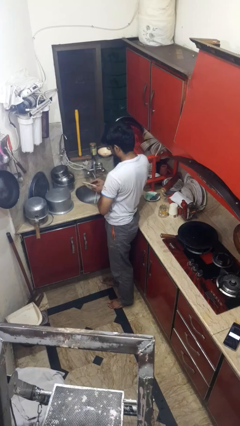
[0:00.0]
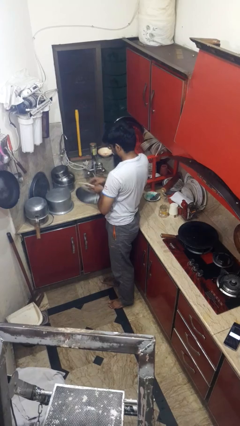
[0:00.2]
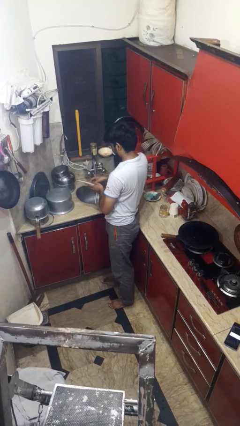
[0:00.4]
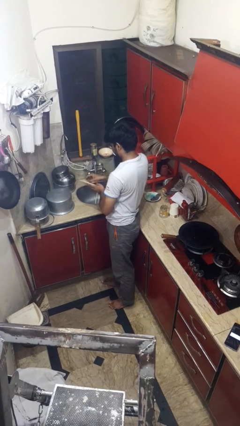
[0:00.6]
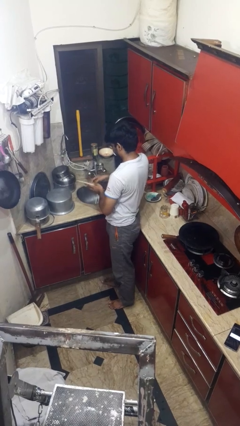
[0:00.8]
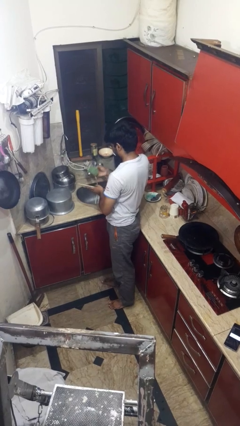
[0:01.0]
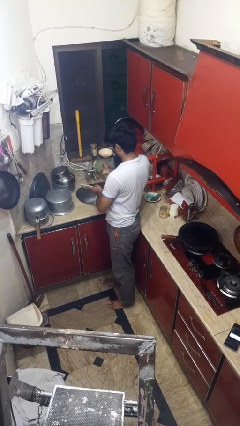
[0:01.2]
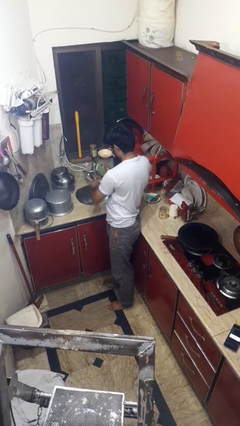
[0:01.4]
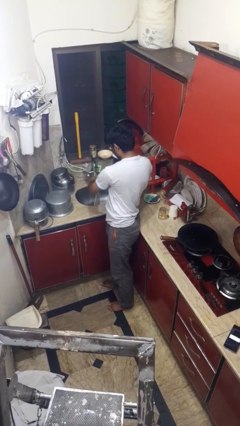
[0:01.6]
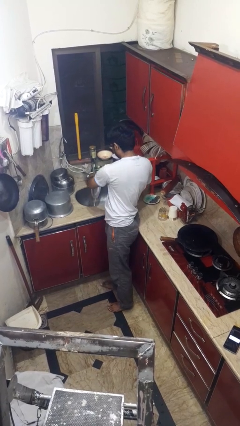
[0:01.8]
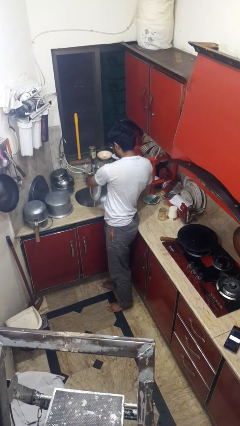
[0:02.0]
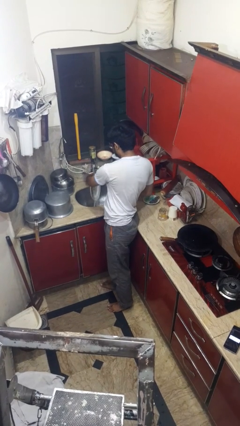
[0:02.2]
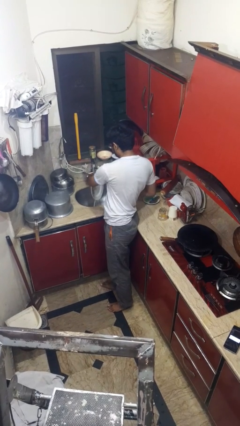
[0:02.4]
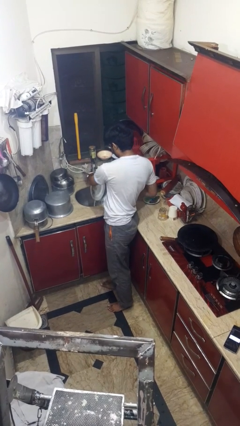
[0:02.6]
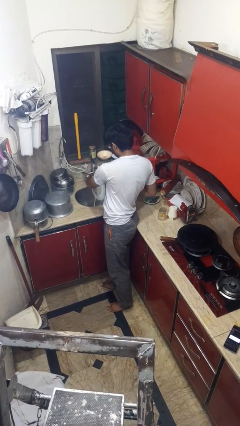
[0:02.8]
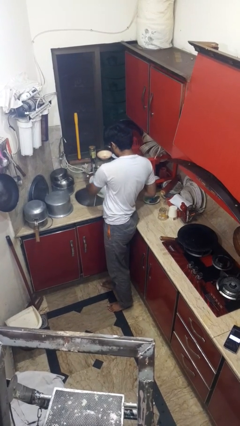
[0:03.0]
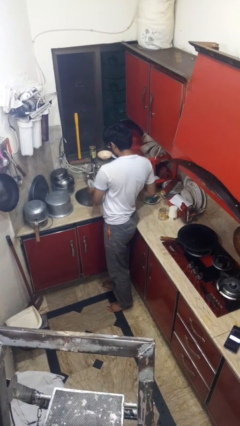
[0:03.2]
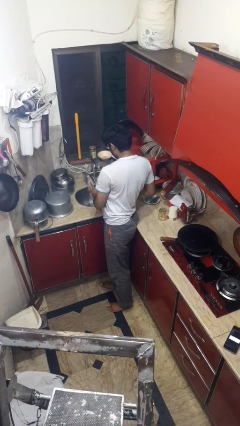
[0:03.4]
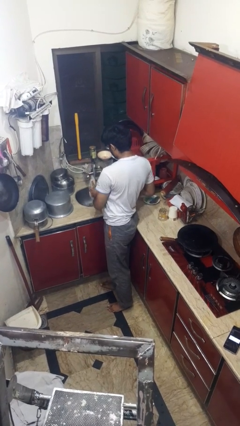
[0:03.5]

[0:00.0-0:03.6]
person washes dish

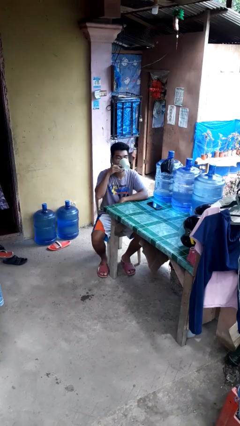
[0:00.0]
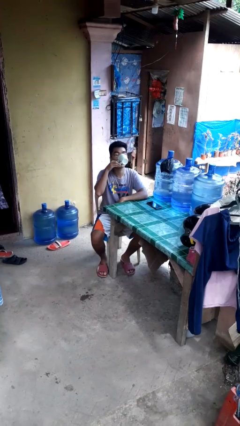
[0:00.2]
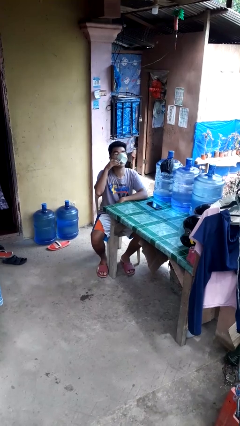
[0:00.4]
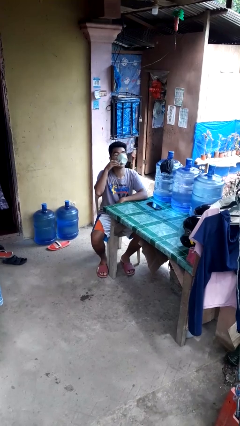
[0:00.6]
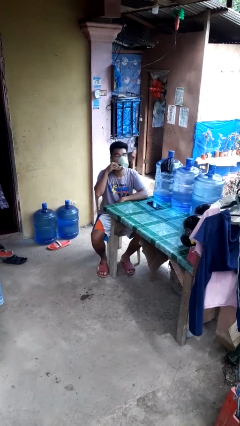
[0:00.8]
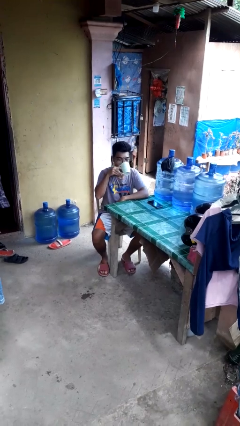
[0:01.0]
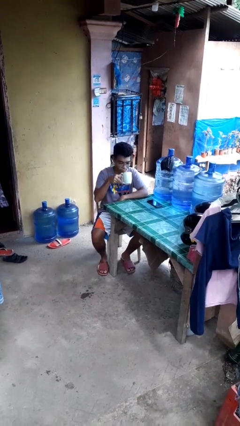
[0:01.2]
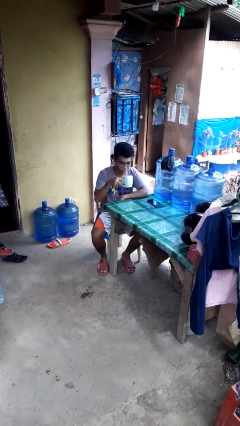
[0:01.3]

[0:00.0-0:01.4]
person drinks from mug

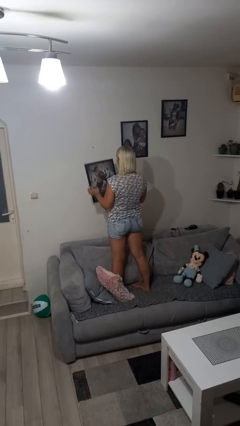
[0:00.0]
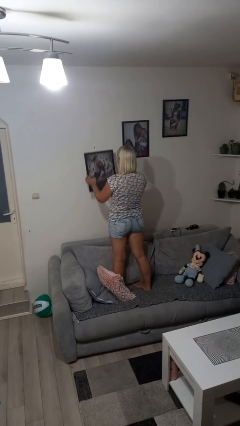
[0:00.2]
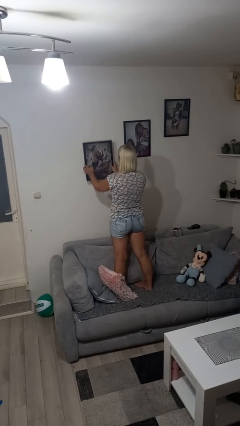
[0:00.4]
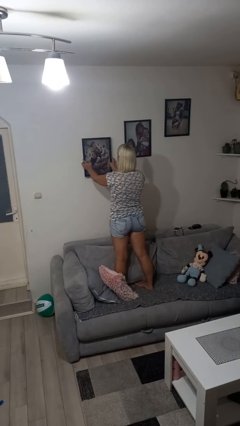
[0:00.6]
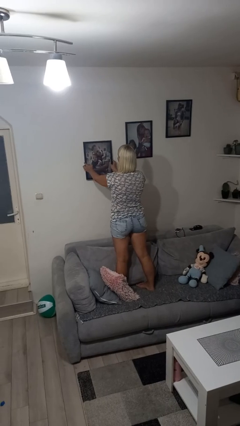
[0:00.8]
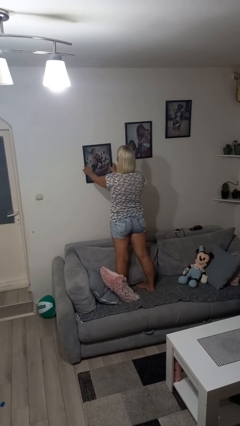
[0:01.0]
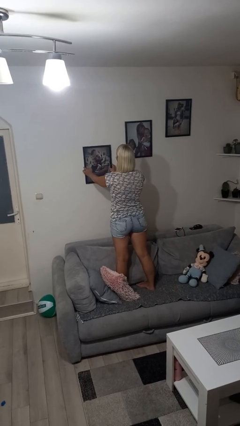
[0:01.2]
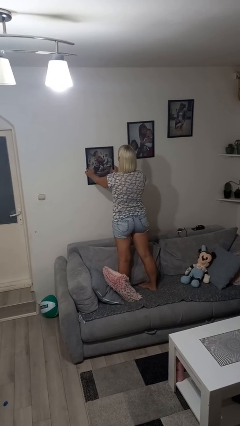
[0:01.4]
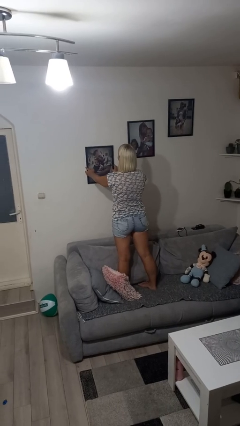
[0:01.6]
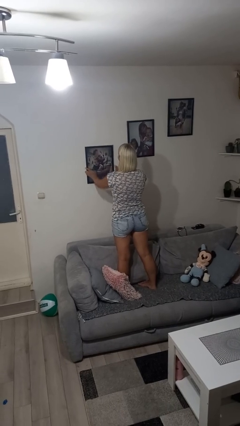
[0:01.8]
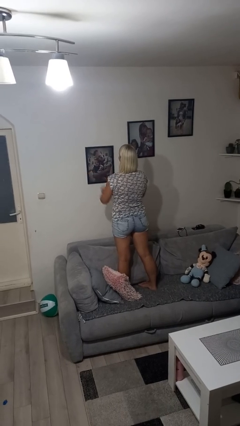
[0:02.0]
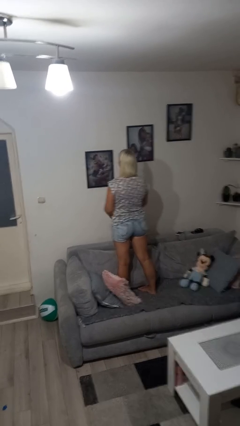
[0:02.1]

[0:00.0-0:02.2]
person puts up picture frame

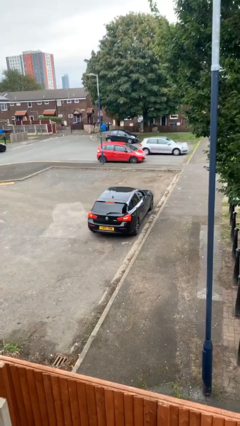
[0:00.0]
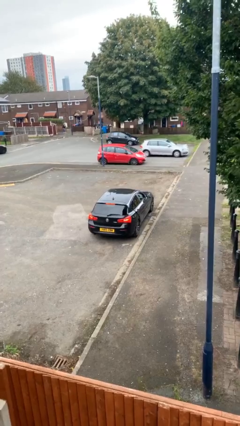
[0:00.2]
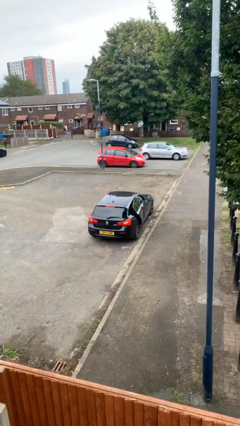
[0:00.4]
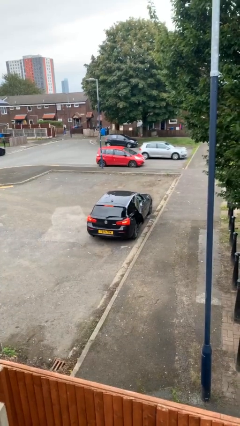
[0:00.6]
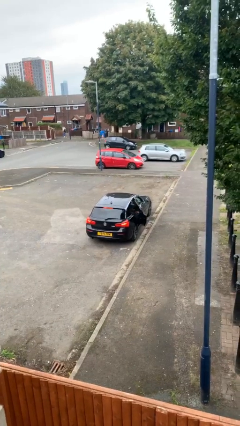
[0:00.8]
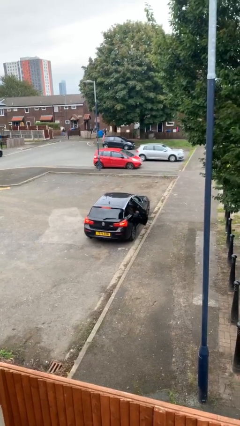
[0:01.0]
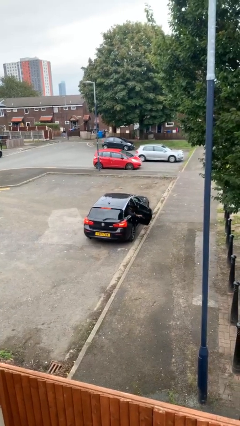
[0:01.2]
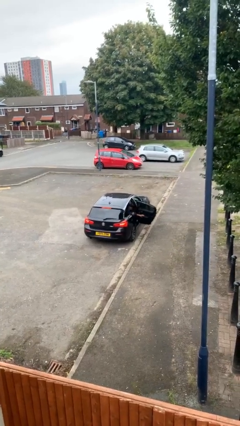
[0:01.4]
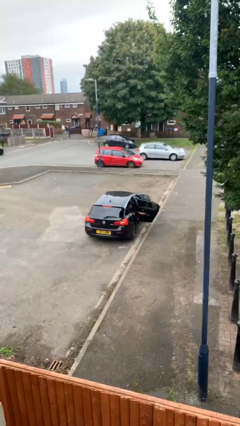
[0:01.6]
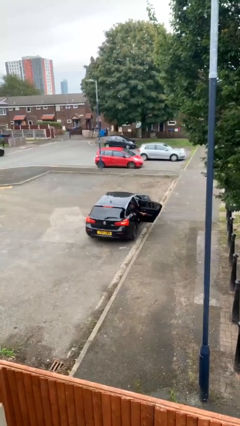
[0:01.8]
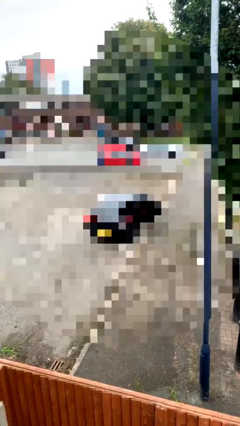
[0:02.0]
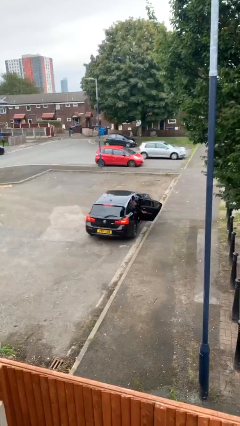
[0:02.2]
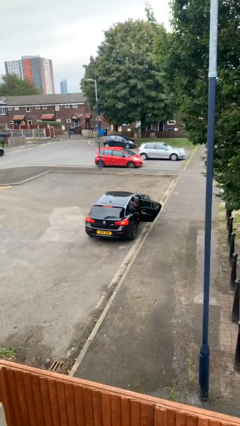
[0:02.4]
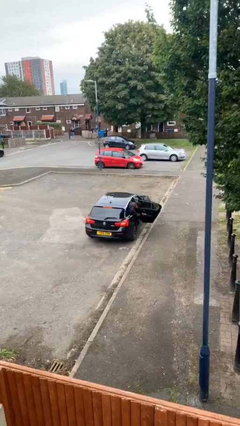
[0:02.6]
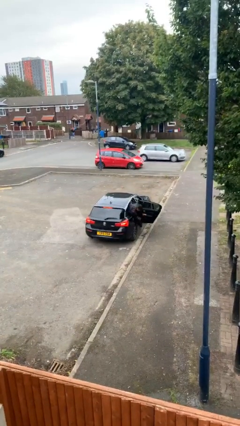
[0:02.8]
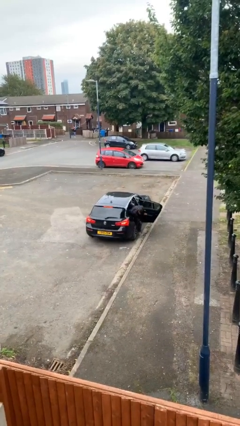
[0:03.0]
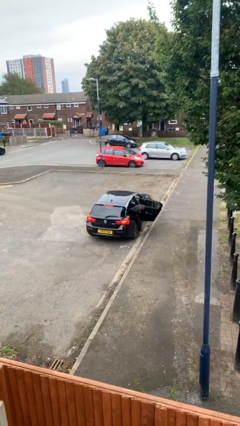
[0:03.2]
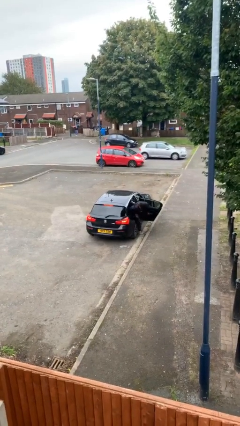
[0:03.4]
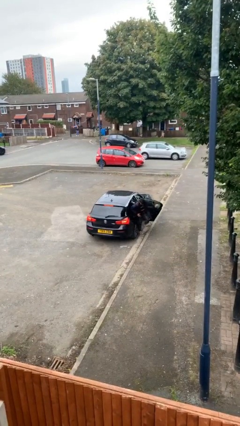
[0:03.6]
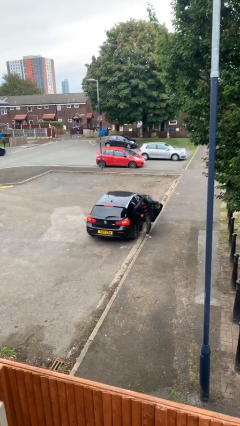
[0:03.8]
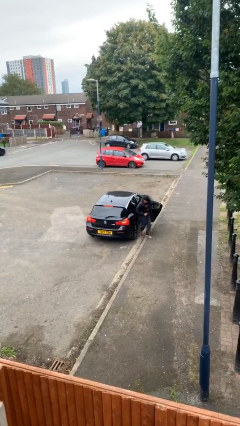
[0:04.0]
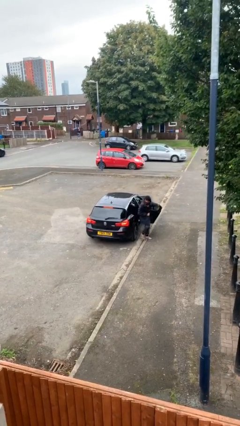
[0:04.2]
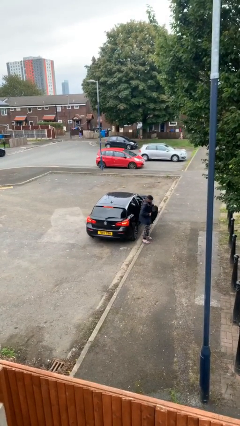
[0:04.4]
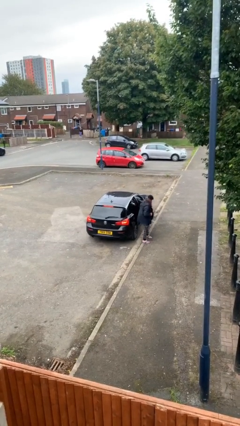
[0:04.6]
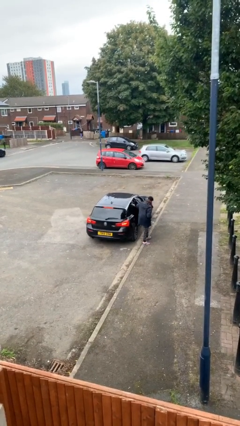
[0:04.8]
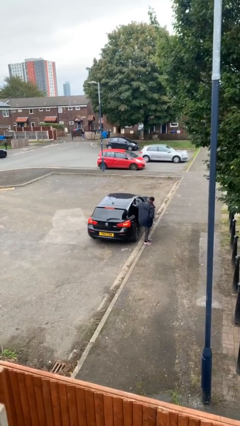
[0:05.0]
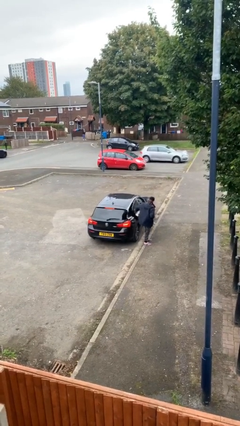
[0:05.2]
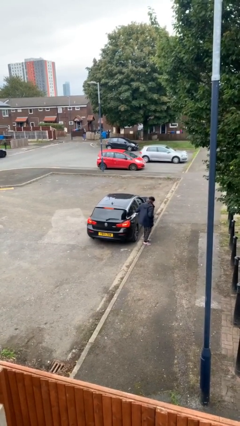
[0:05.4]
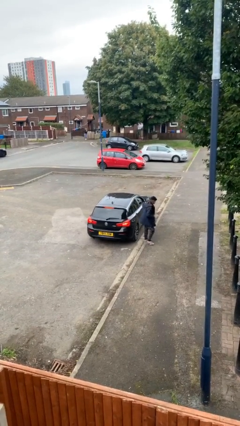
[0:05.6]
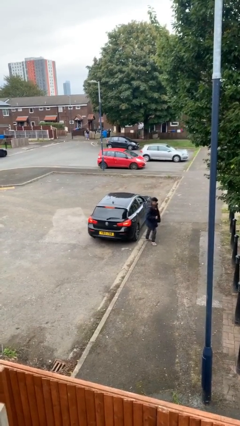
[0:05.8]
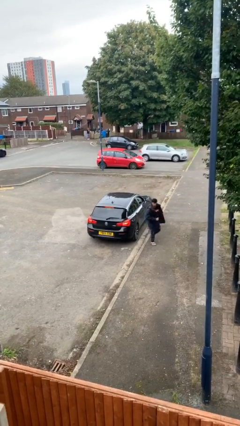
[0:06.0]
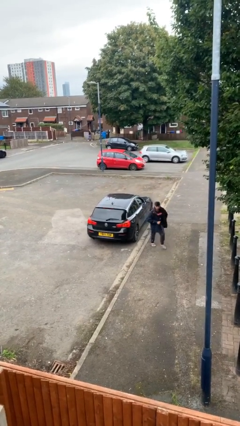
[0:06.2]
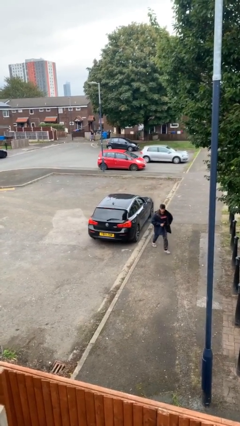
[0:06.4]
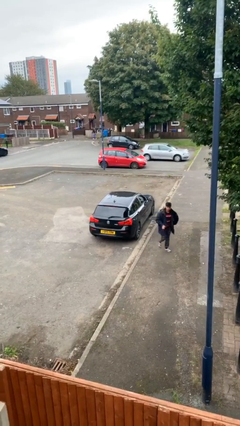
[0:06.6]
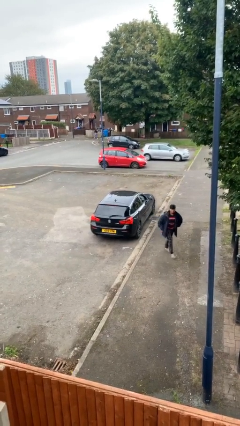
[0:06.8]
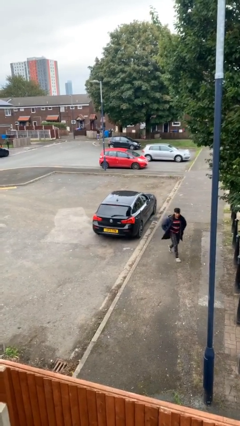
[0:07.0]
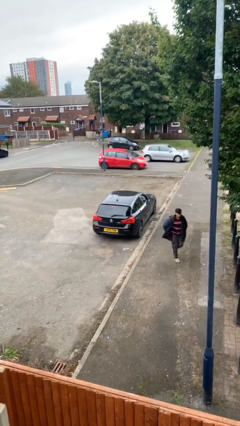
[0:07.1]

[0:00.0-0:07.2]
car drops off person

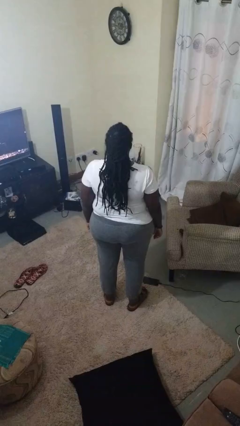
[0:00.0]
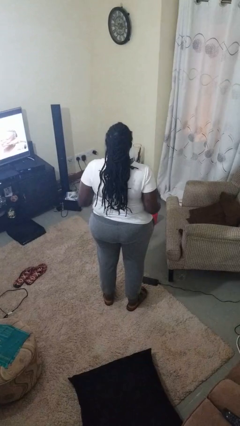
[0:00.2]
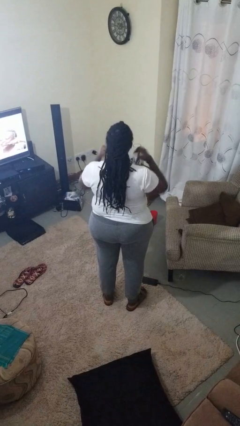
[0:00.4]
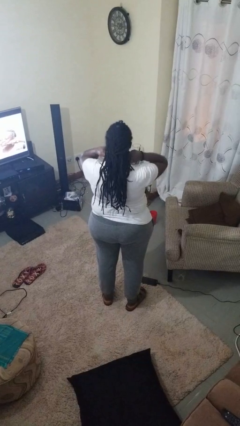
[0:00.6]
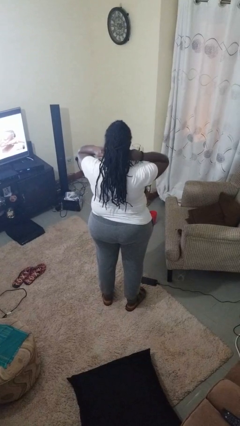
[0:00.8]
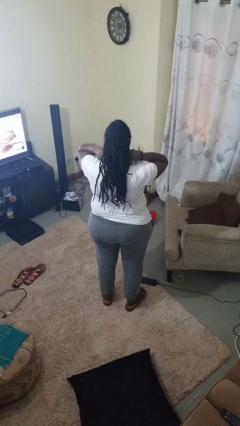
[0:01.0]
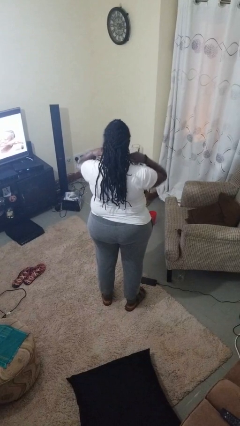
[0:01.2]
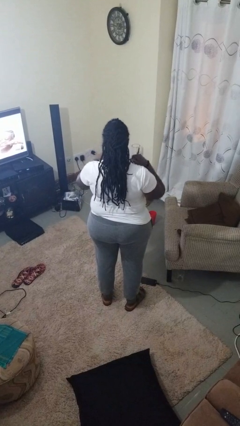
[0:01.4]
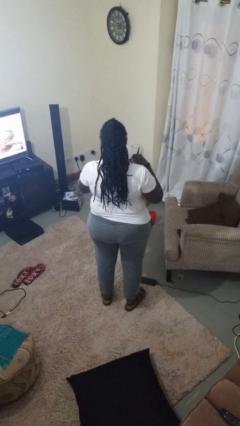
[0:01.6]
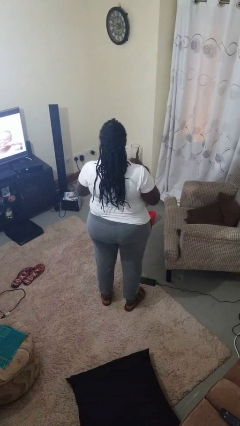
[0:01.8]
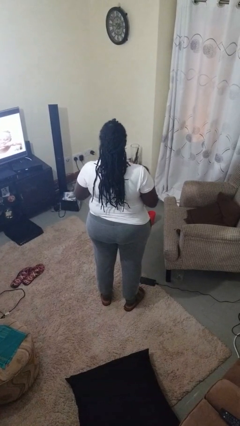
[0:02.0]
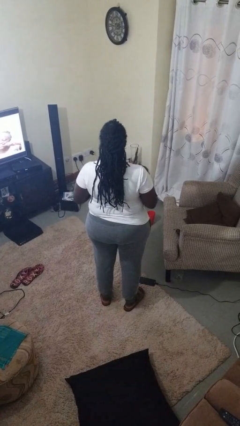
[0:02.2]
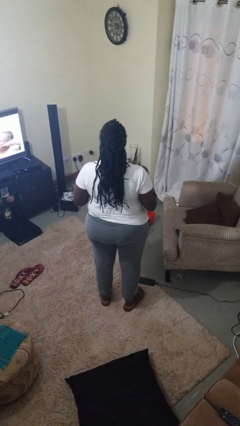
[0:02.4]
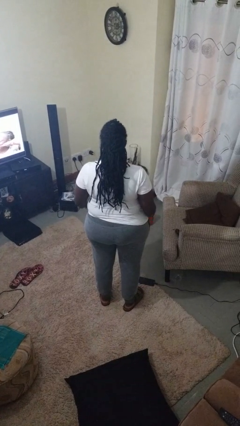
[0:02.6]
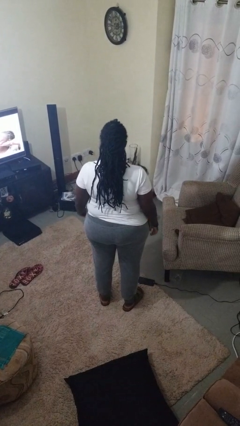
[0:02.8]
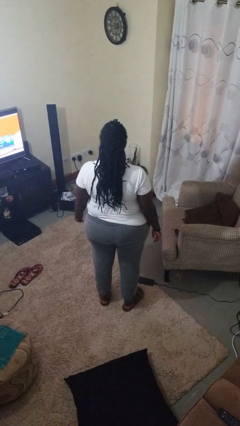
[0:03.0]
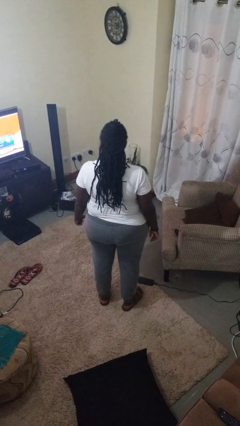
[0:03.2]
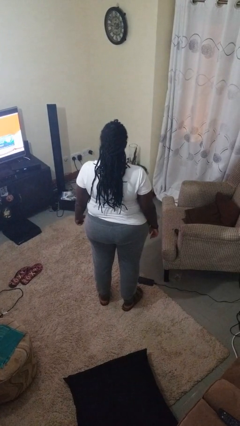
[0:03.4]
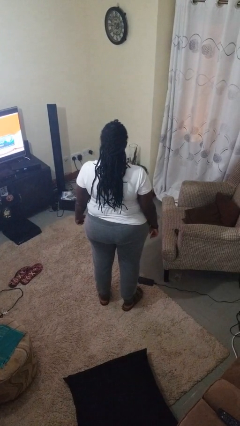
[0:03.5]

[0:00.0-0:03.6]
person takes off necklace
